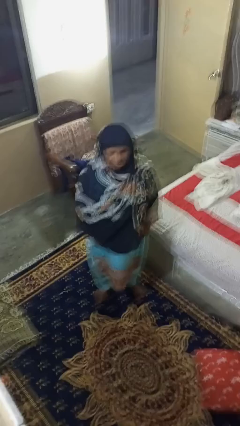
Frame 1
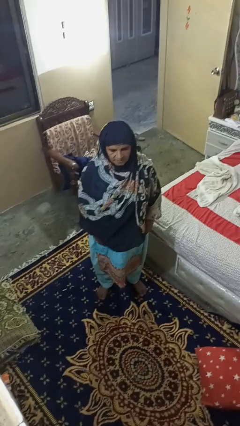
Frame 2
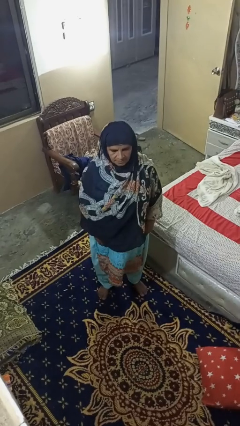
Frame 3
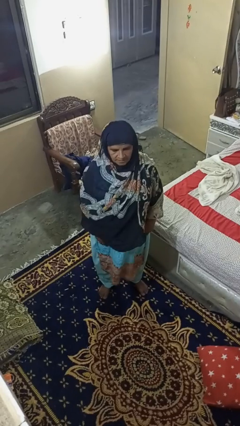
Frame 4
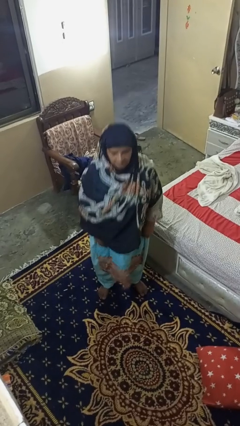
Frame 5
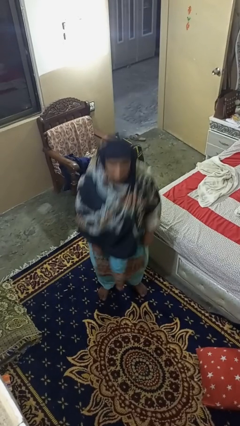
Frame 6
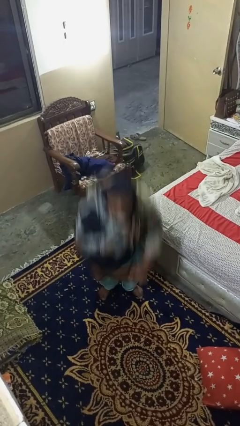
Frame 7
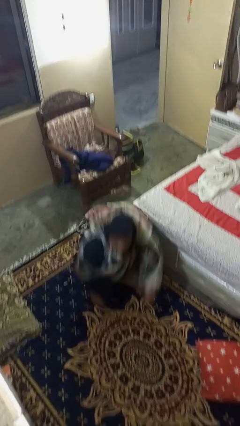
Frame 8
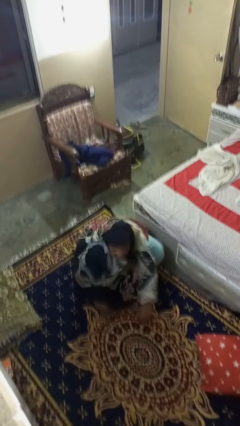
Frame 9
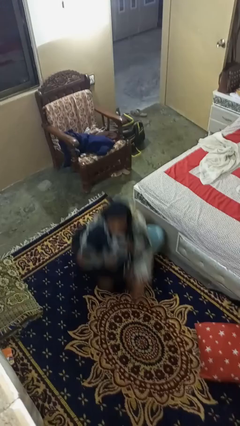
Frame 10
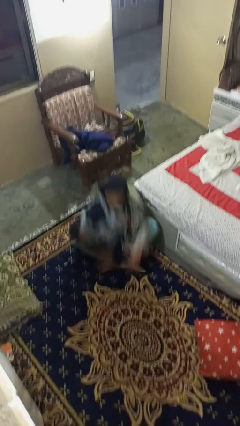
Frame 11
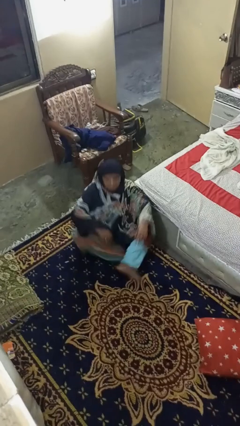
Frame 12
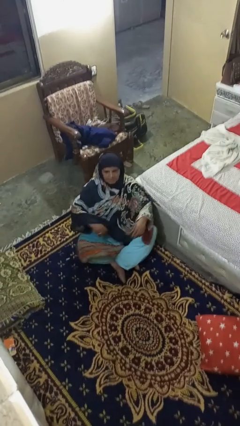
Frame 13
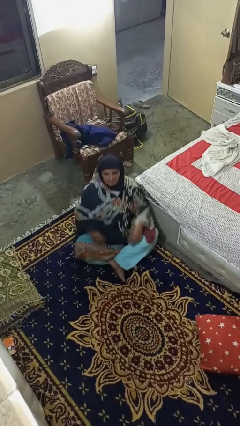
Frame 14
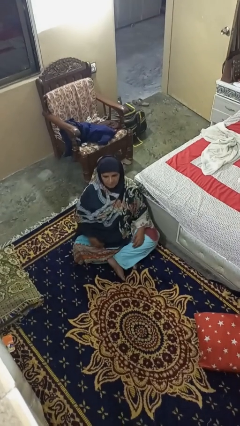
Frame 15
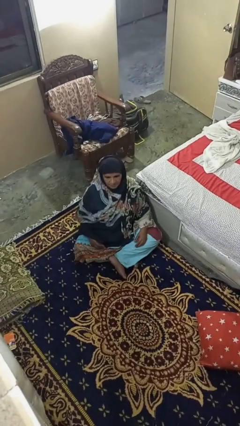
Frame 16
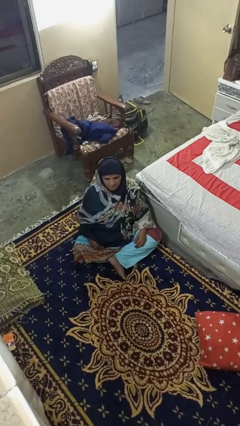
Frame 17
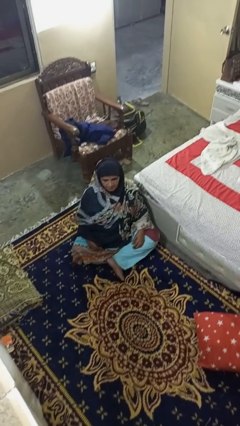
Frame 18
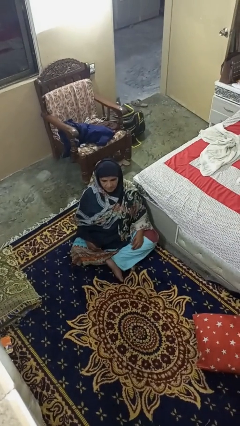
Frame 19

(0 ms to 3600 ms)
person sits crisscross

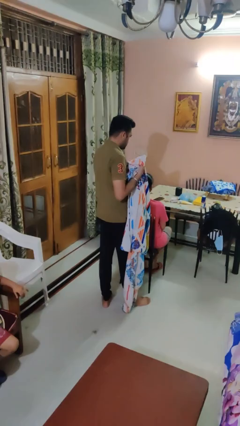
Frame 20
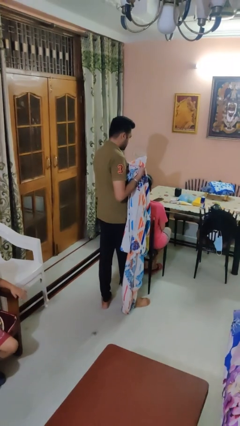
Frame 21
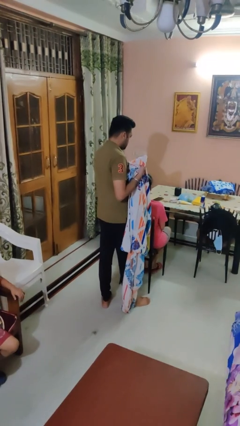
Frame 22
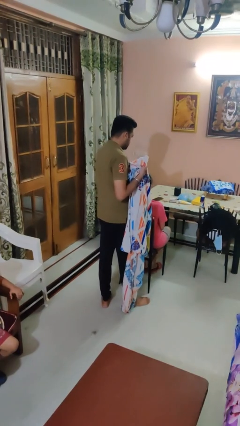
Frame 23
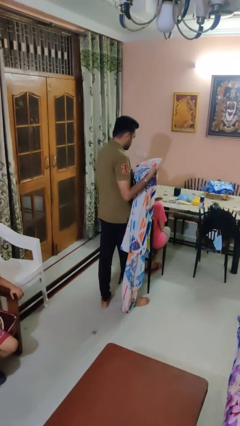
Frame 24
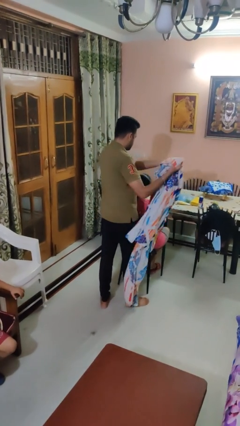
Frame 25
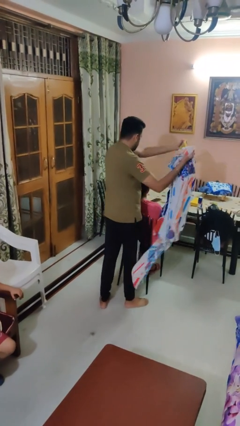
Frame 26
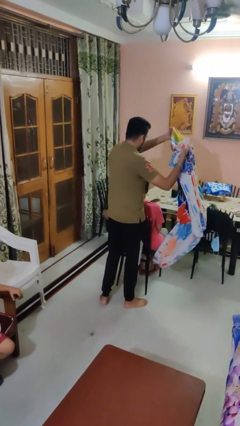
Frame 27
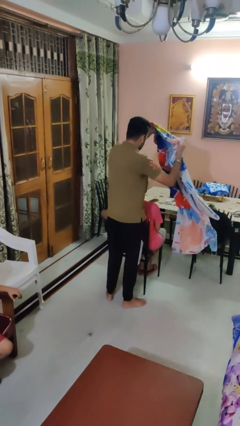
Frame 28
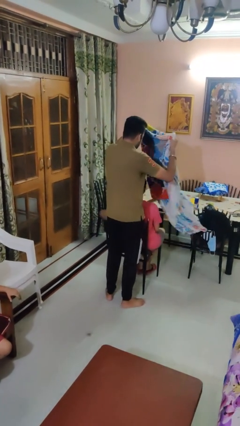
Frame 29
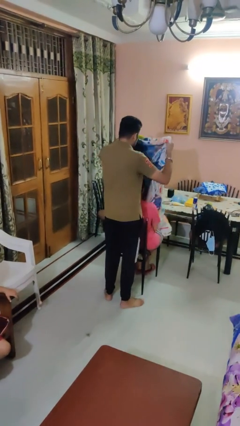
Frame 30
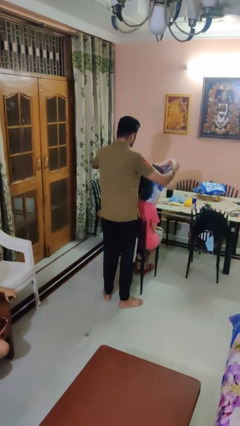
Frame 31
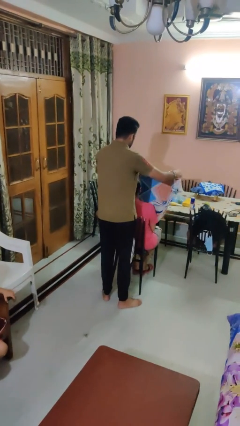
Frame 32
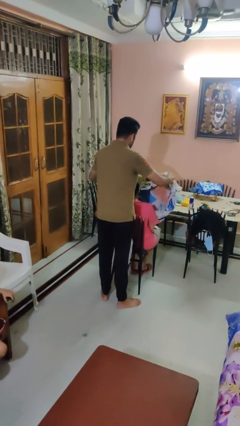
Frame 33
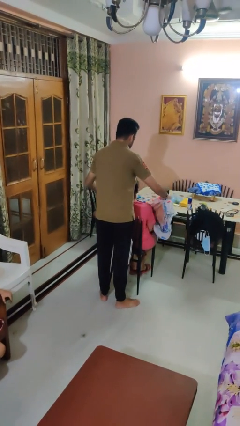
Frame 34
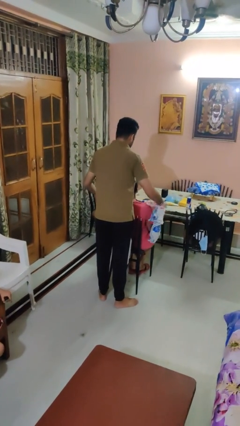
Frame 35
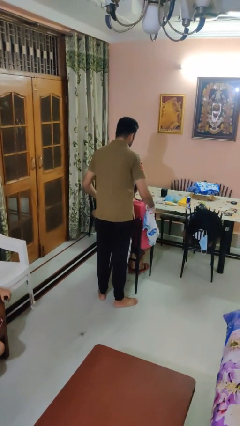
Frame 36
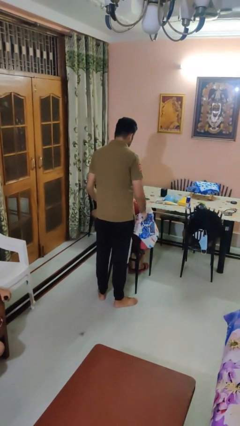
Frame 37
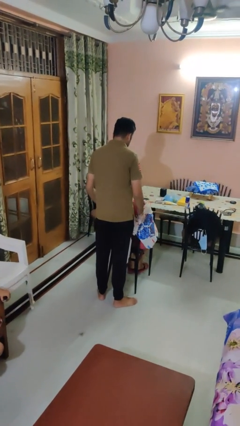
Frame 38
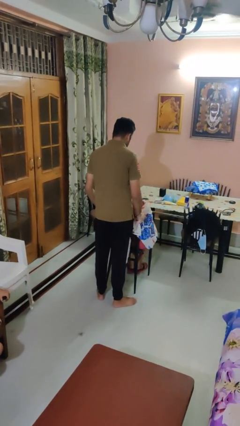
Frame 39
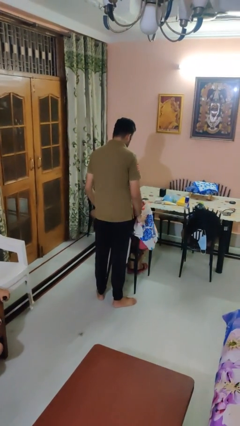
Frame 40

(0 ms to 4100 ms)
person covers friend with blanket

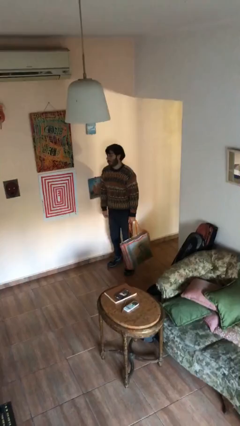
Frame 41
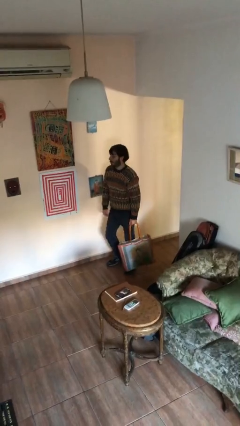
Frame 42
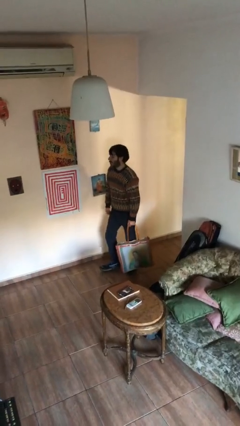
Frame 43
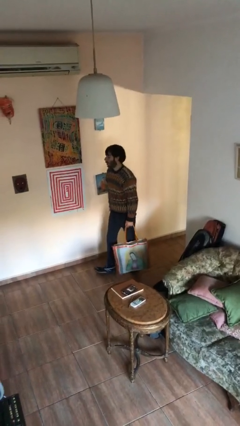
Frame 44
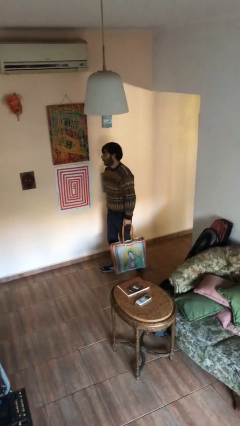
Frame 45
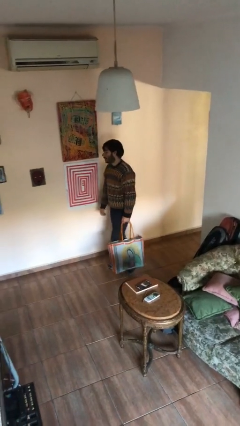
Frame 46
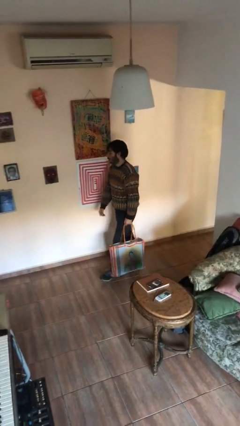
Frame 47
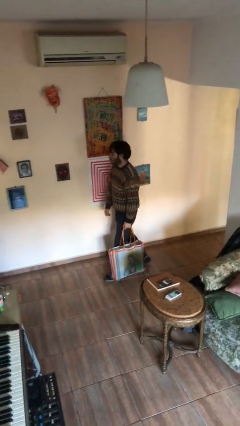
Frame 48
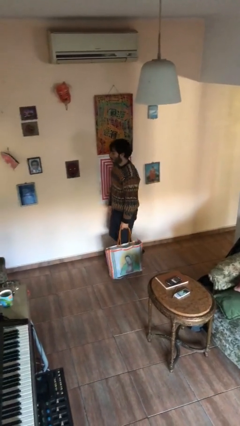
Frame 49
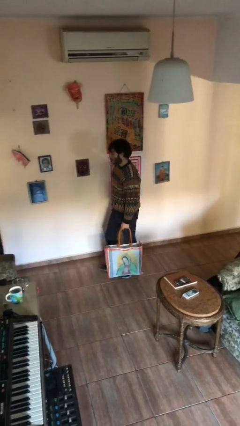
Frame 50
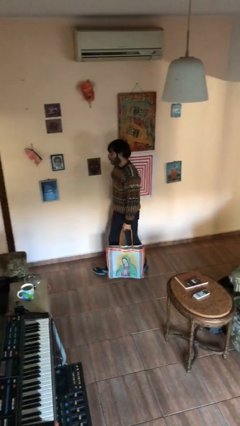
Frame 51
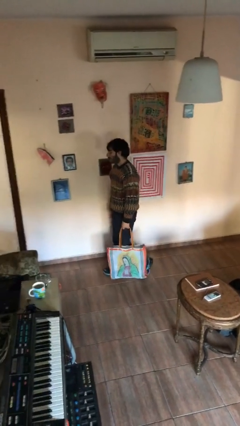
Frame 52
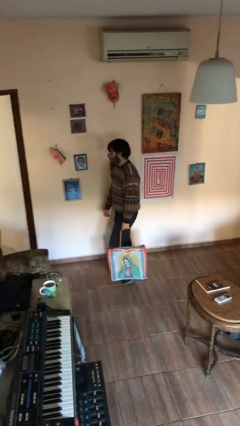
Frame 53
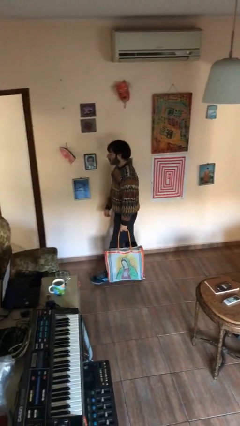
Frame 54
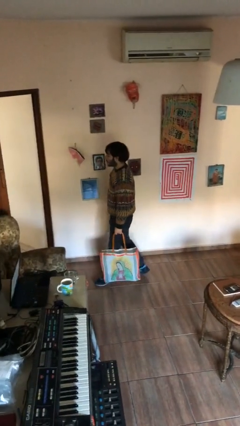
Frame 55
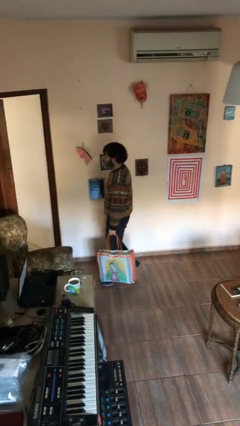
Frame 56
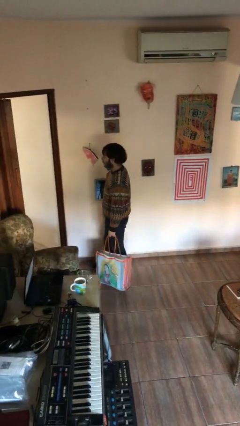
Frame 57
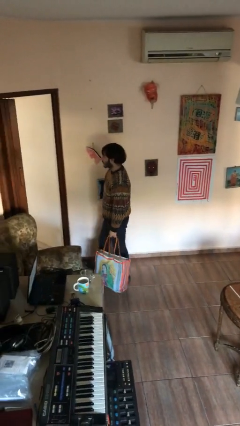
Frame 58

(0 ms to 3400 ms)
person carries groceries

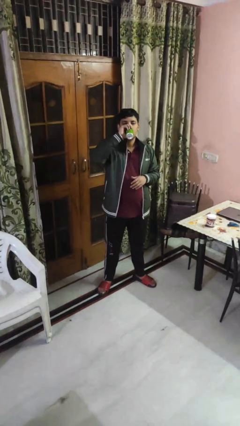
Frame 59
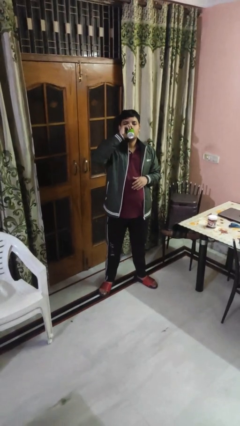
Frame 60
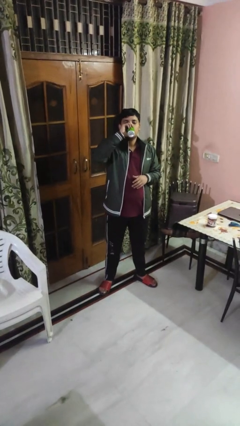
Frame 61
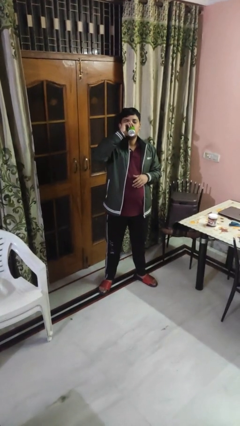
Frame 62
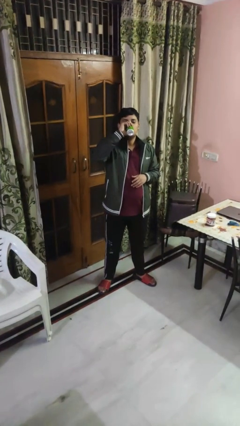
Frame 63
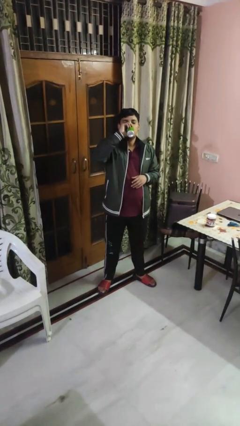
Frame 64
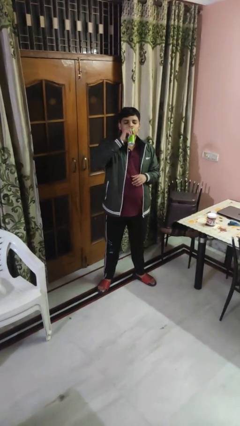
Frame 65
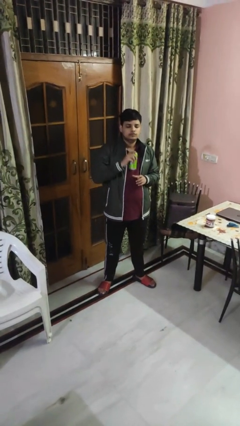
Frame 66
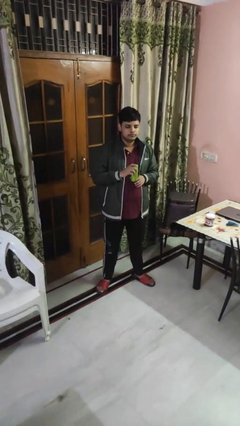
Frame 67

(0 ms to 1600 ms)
person drinks from beverage can

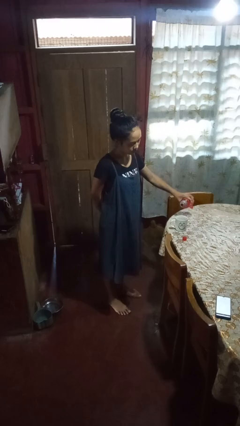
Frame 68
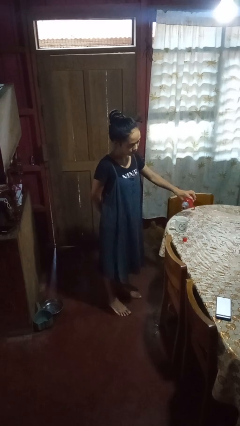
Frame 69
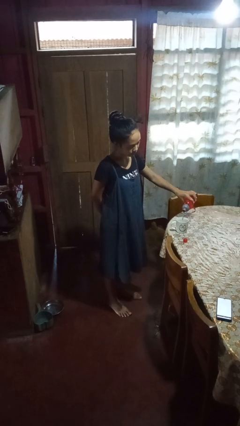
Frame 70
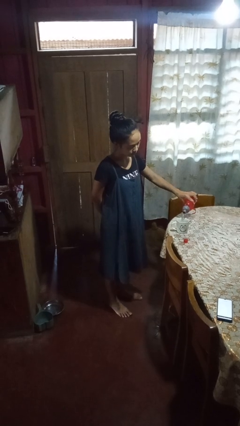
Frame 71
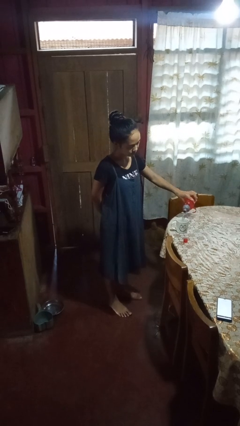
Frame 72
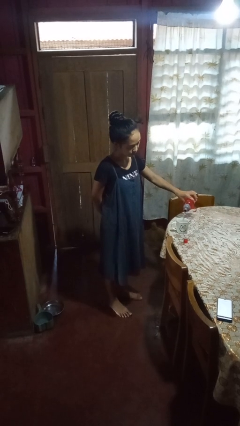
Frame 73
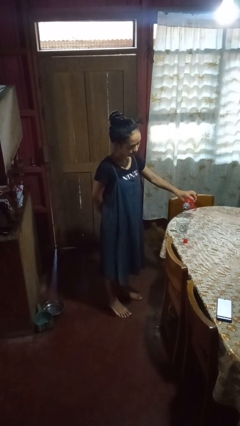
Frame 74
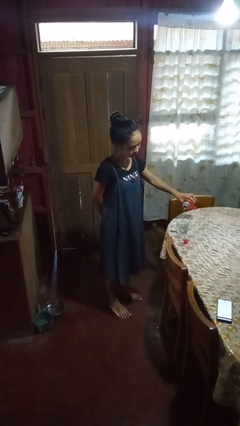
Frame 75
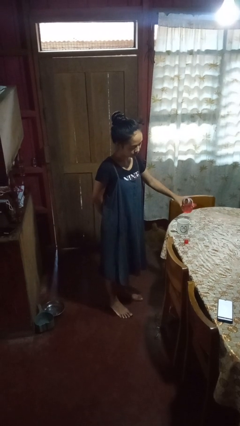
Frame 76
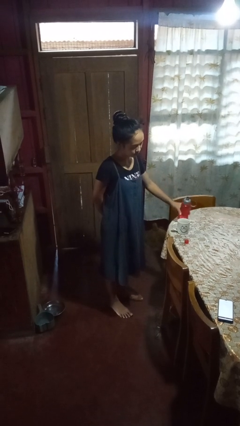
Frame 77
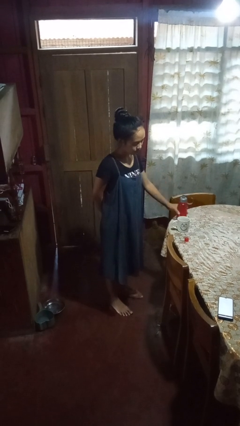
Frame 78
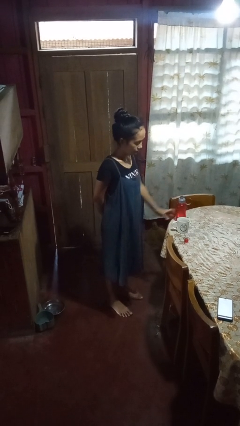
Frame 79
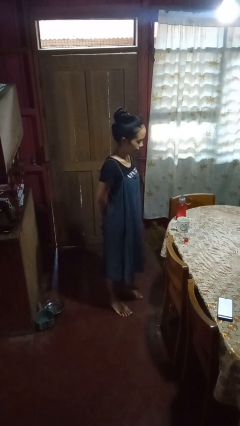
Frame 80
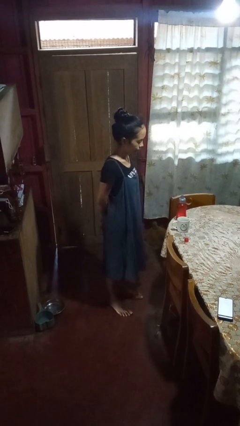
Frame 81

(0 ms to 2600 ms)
person pours liquid into cup

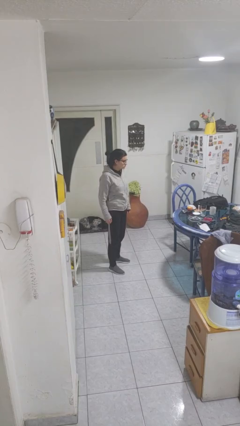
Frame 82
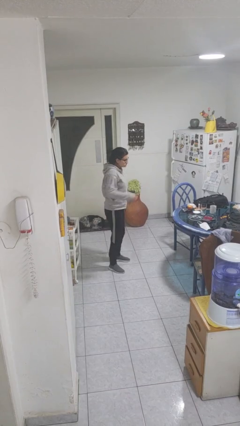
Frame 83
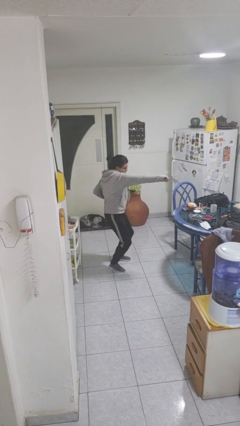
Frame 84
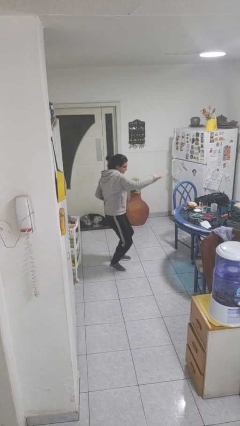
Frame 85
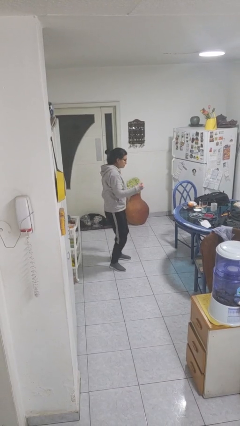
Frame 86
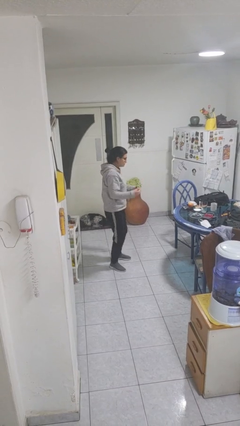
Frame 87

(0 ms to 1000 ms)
person punches

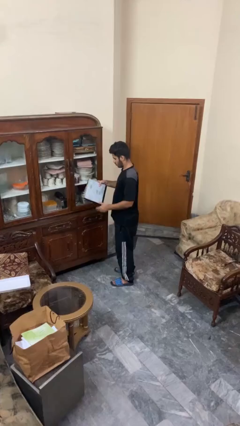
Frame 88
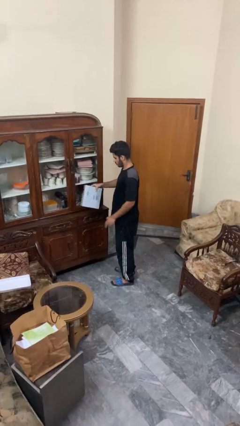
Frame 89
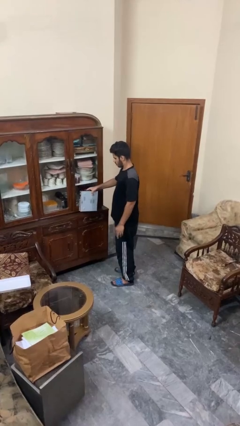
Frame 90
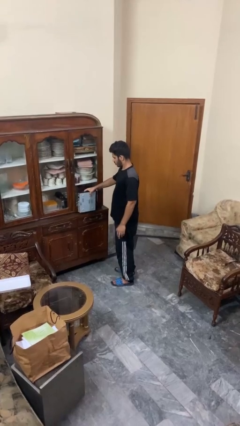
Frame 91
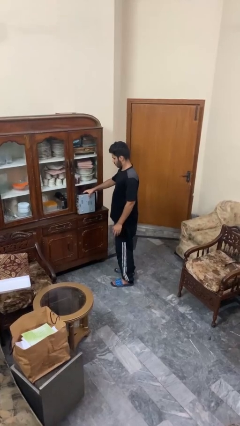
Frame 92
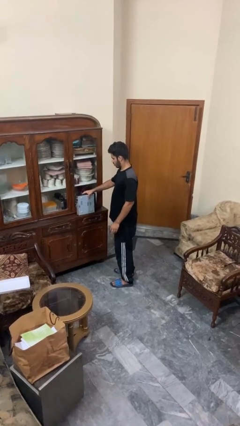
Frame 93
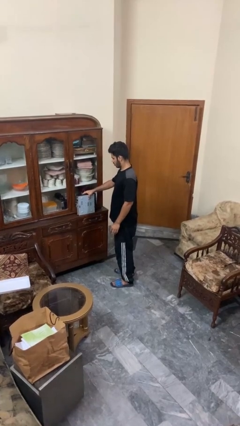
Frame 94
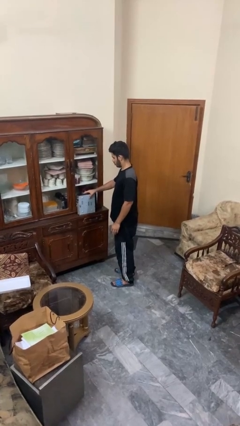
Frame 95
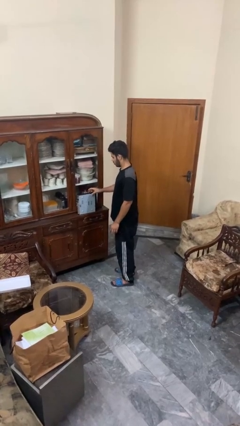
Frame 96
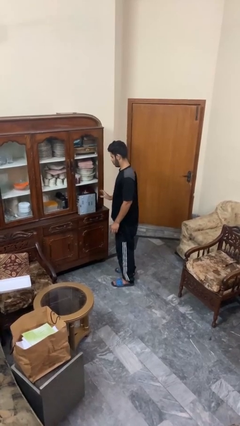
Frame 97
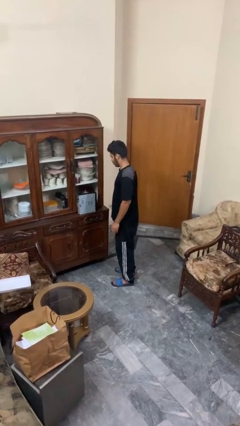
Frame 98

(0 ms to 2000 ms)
person puts down object on countertop
